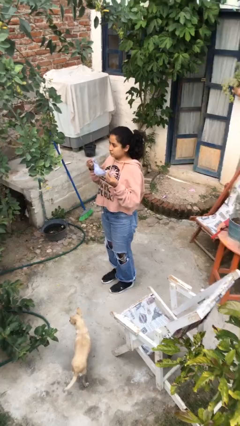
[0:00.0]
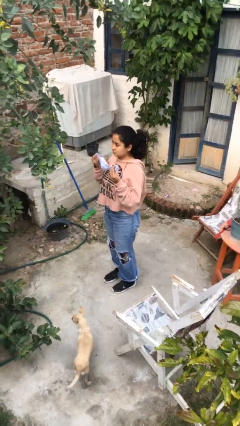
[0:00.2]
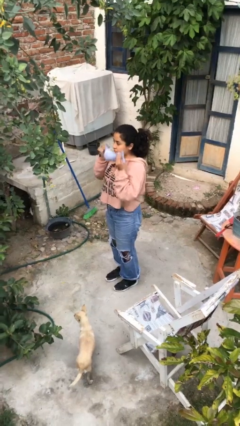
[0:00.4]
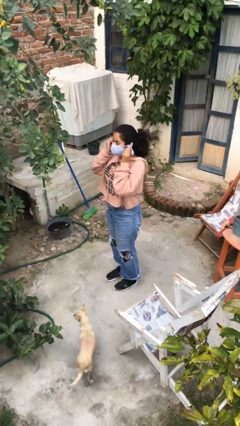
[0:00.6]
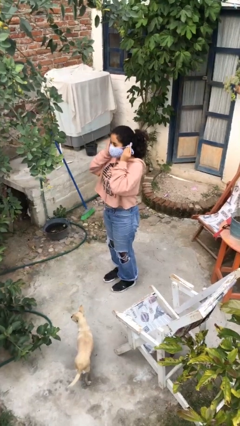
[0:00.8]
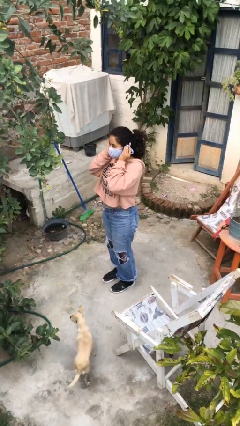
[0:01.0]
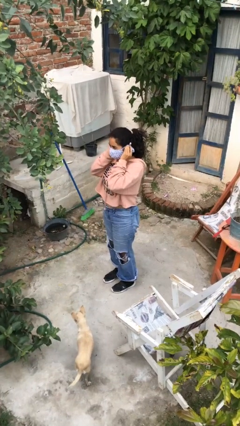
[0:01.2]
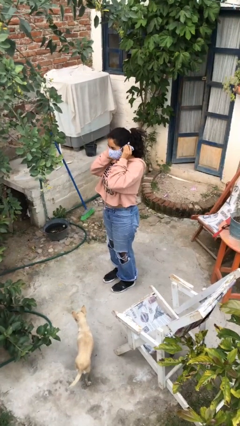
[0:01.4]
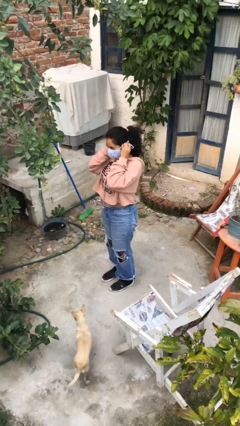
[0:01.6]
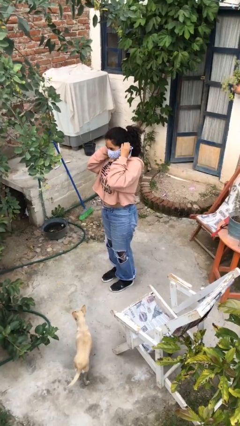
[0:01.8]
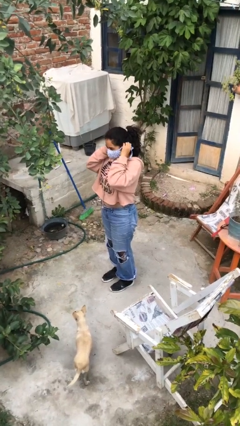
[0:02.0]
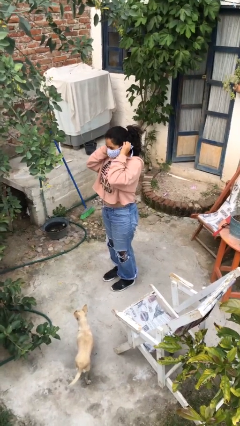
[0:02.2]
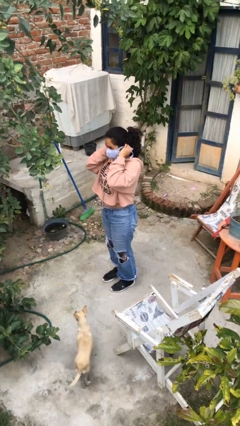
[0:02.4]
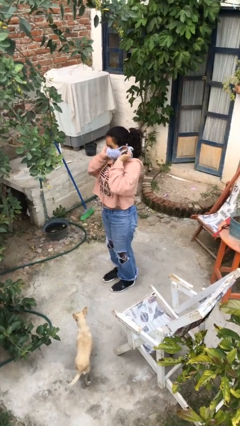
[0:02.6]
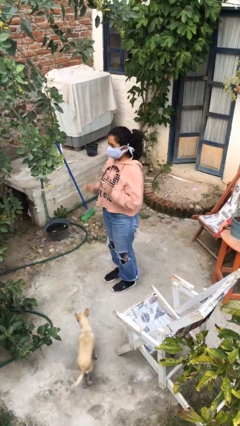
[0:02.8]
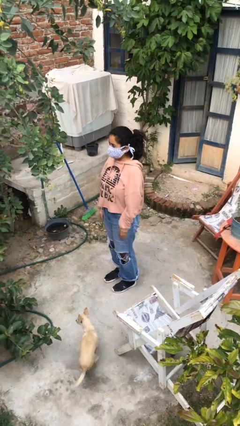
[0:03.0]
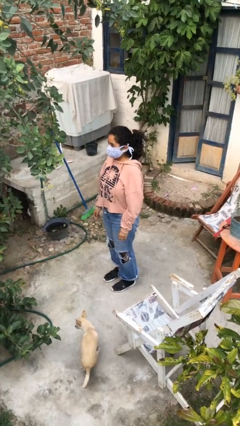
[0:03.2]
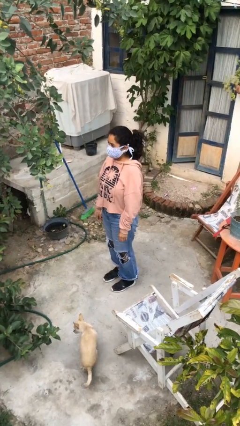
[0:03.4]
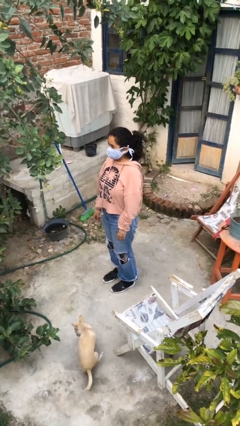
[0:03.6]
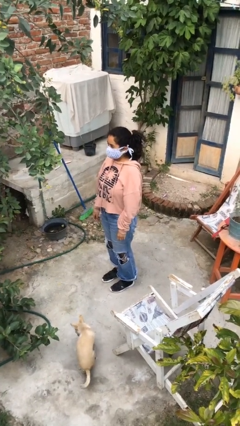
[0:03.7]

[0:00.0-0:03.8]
person puts on facemask

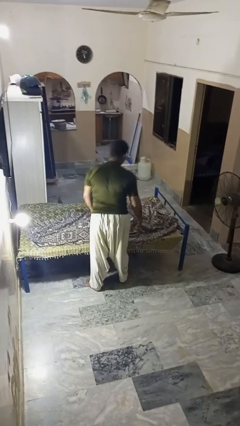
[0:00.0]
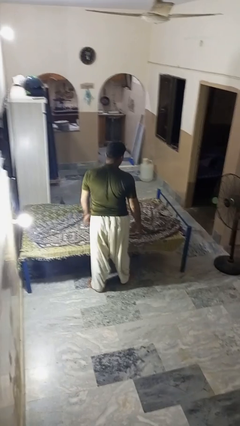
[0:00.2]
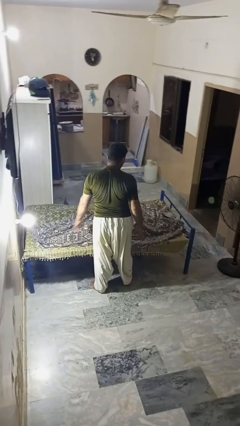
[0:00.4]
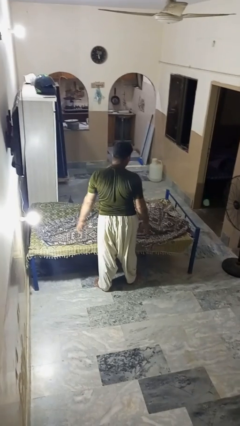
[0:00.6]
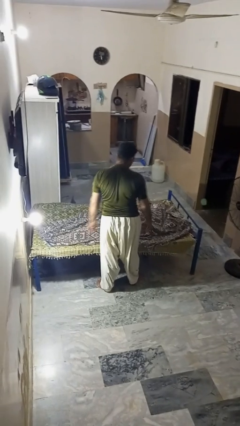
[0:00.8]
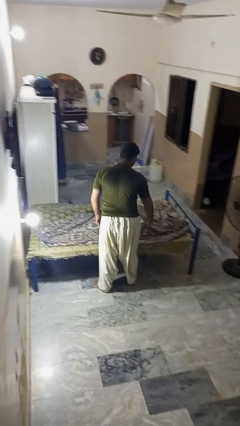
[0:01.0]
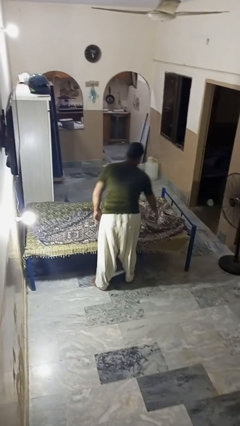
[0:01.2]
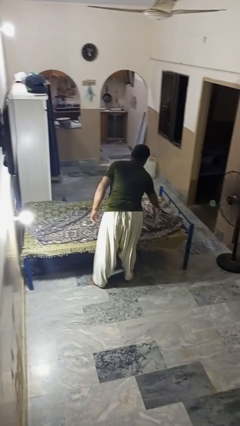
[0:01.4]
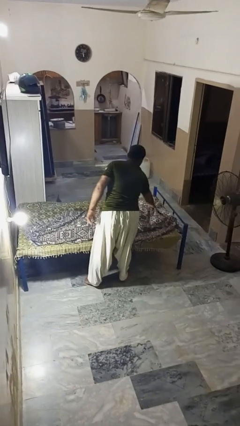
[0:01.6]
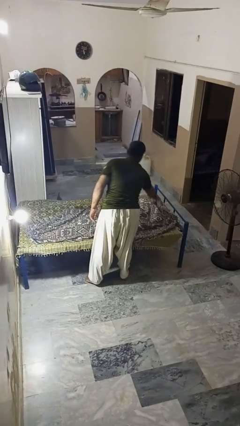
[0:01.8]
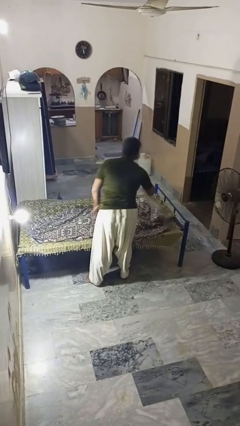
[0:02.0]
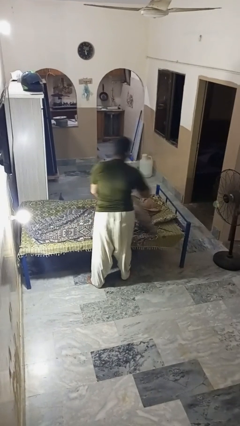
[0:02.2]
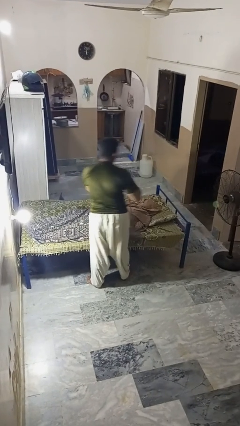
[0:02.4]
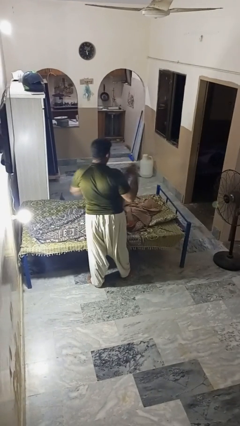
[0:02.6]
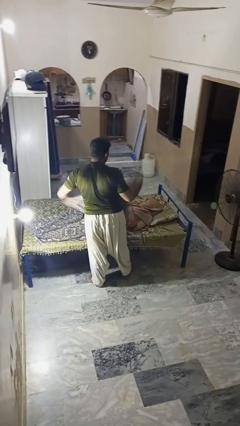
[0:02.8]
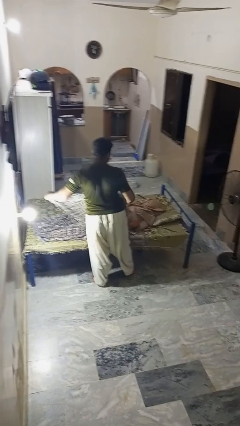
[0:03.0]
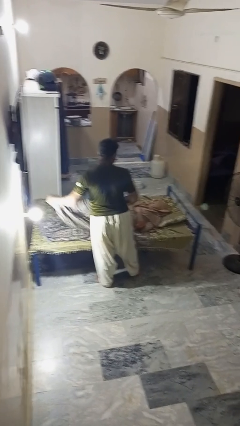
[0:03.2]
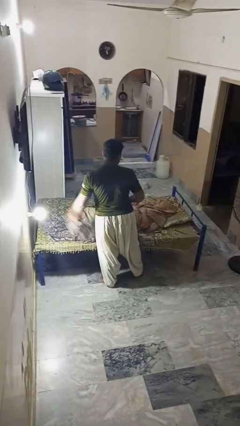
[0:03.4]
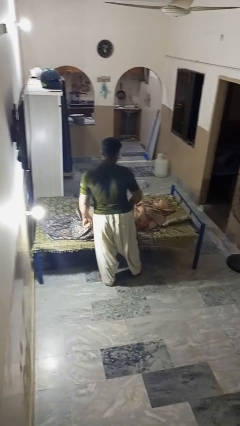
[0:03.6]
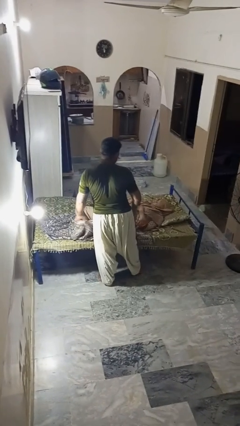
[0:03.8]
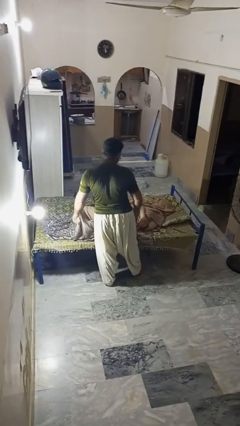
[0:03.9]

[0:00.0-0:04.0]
person uncovers friend with blanket

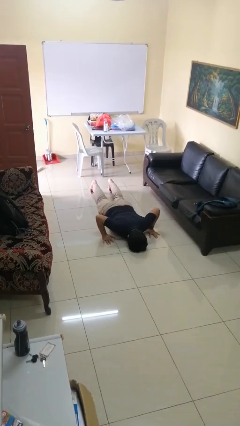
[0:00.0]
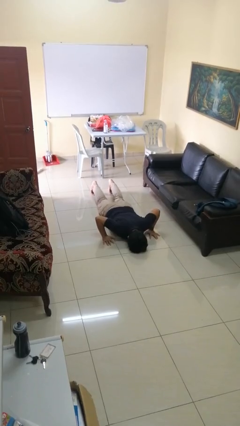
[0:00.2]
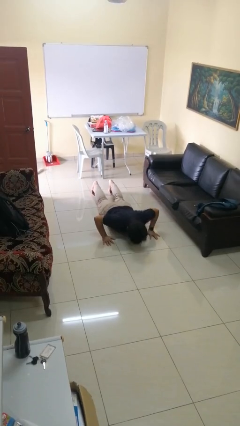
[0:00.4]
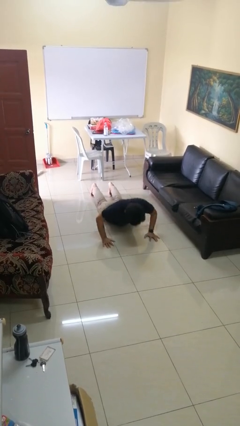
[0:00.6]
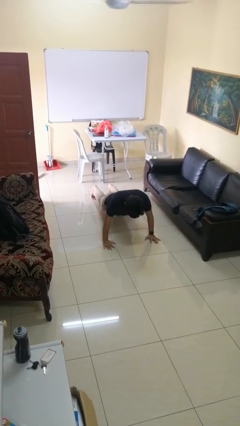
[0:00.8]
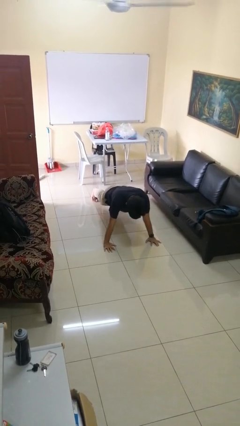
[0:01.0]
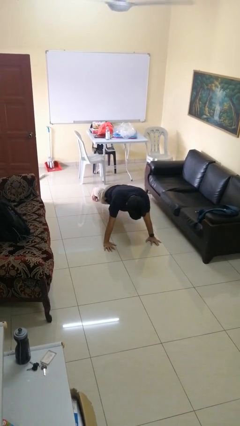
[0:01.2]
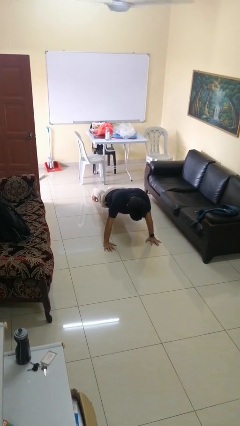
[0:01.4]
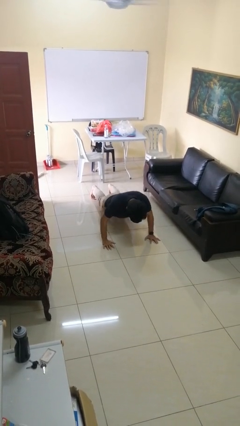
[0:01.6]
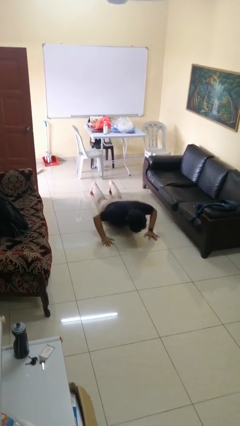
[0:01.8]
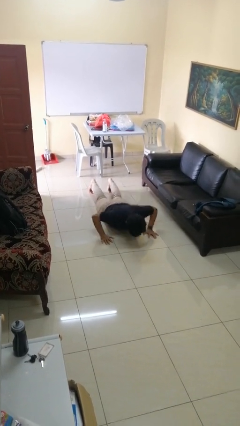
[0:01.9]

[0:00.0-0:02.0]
person exercises with pushup

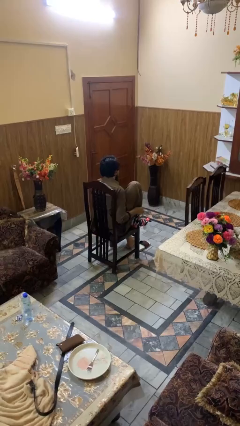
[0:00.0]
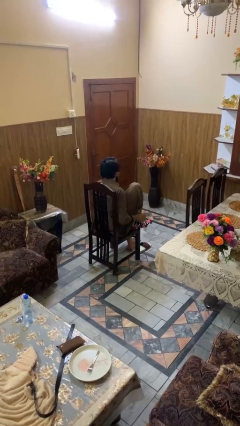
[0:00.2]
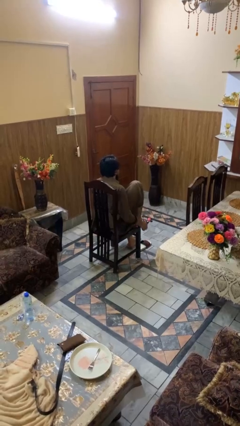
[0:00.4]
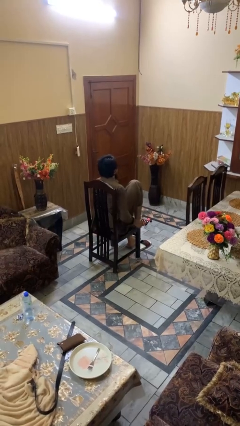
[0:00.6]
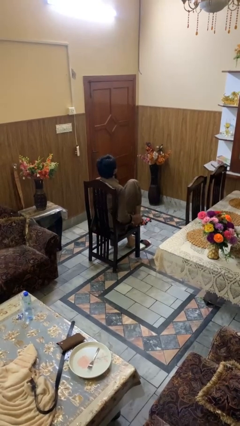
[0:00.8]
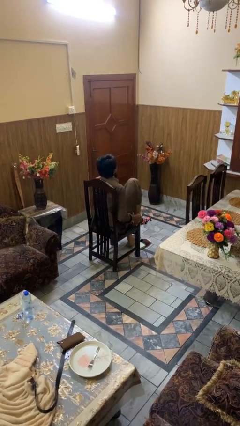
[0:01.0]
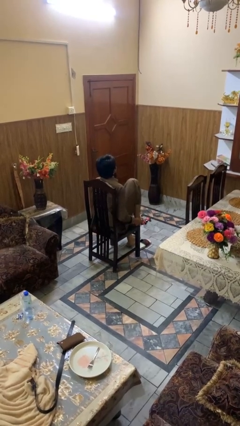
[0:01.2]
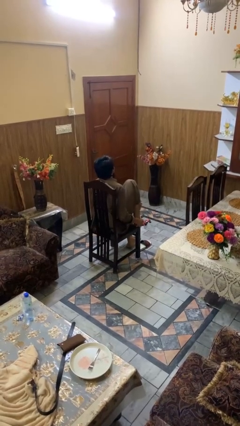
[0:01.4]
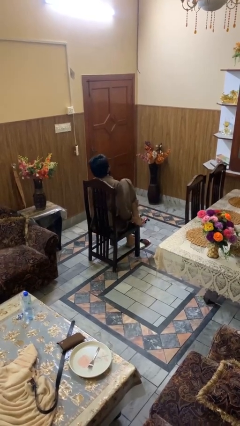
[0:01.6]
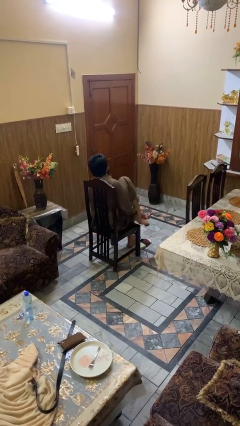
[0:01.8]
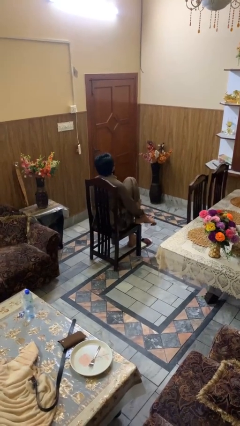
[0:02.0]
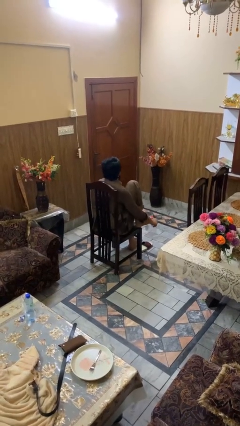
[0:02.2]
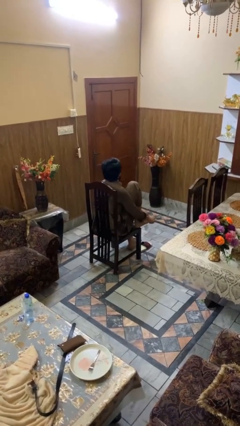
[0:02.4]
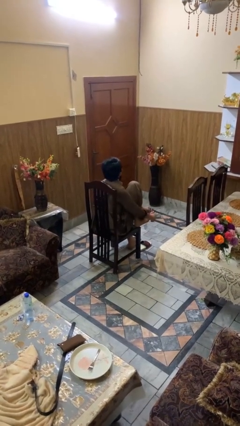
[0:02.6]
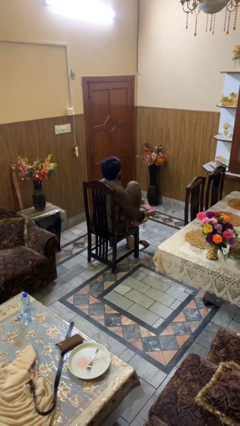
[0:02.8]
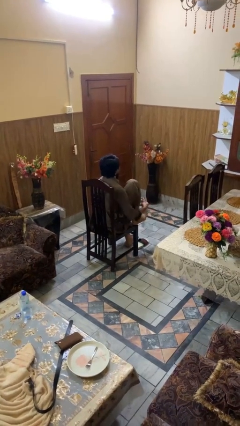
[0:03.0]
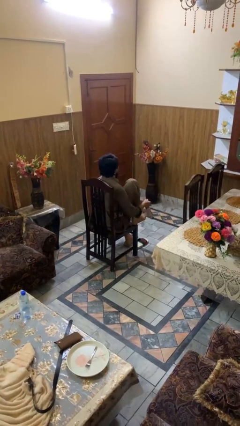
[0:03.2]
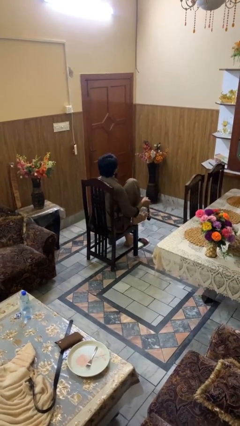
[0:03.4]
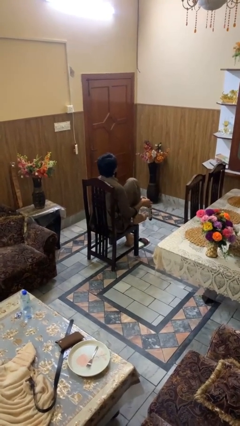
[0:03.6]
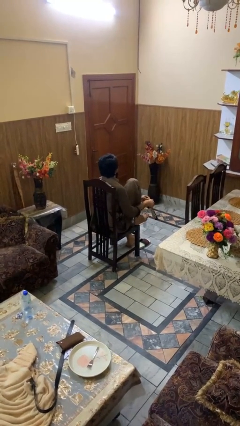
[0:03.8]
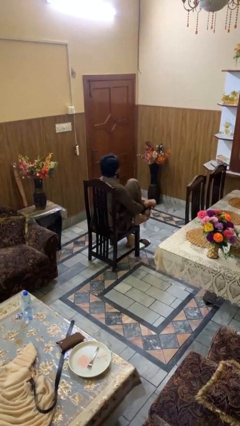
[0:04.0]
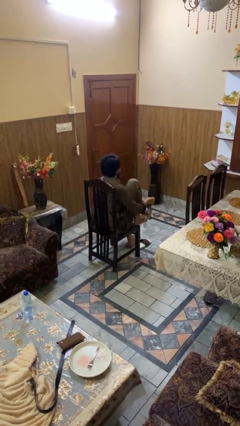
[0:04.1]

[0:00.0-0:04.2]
person takes off socks

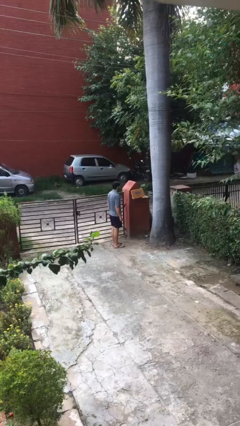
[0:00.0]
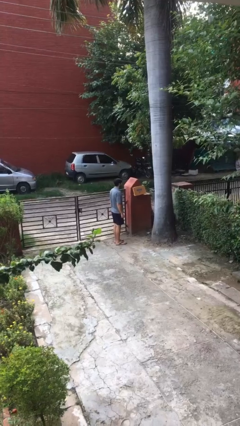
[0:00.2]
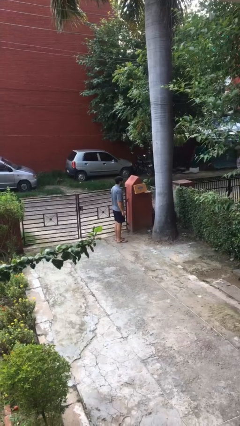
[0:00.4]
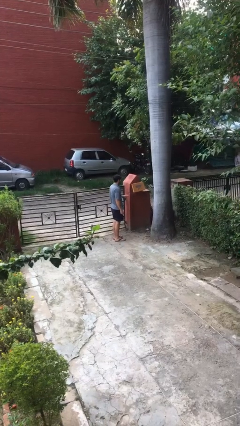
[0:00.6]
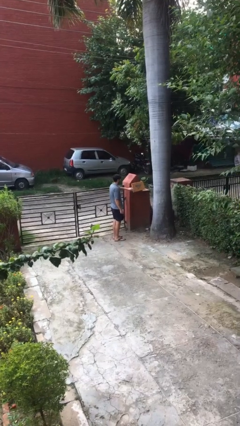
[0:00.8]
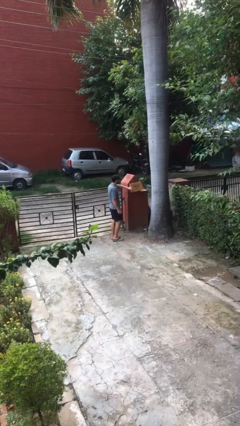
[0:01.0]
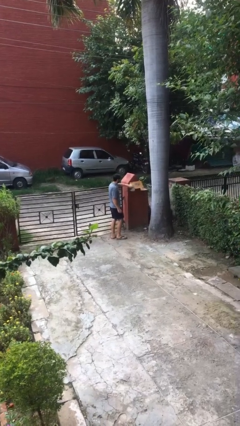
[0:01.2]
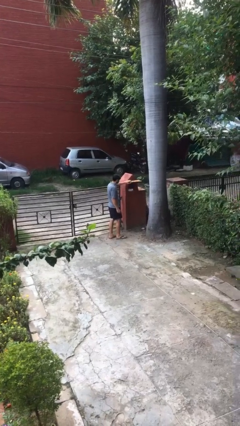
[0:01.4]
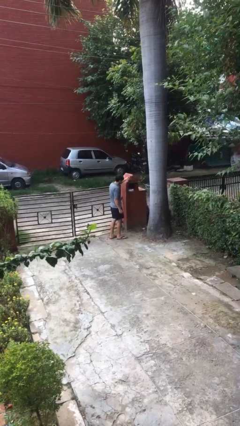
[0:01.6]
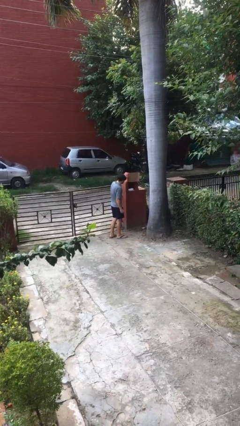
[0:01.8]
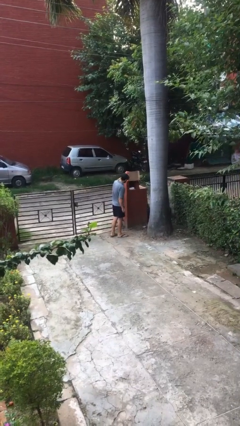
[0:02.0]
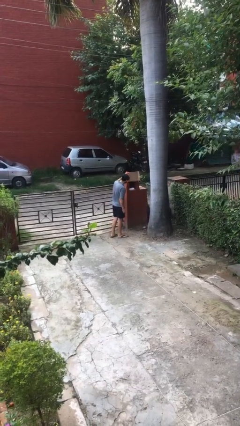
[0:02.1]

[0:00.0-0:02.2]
person opens mailbox

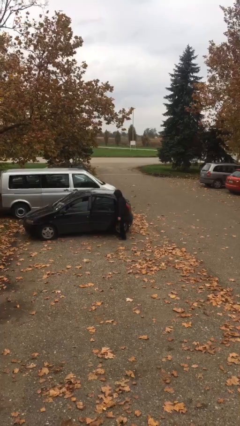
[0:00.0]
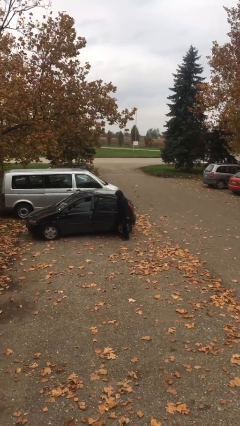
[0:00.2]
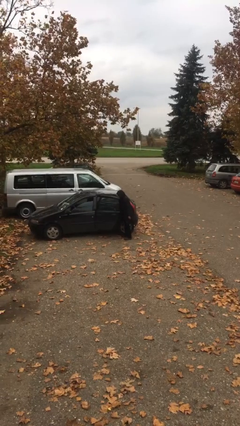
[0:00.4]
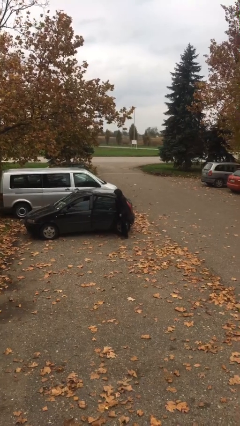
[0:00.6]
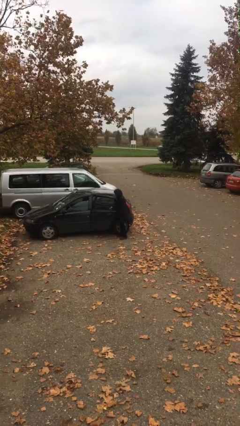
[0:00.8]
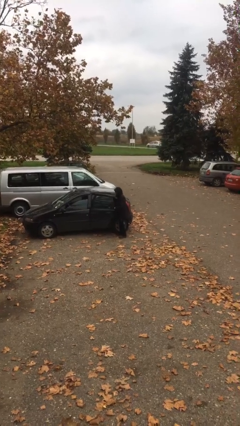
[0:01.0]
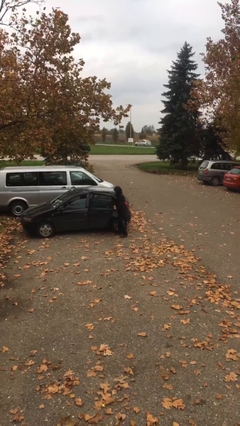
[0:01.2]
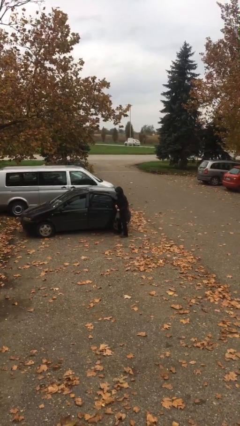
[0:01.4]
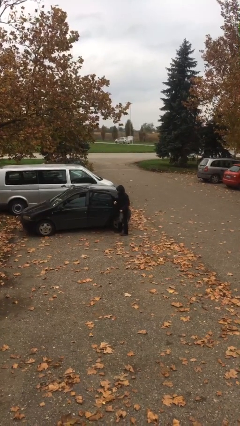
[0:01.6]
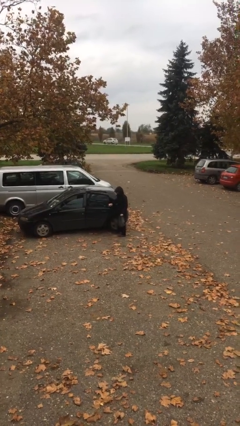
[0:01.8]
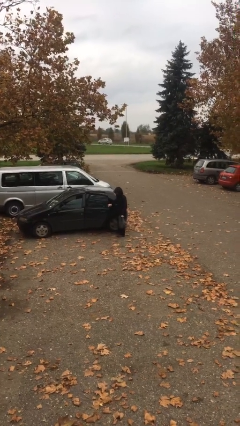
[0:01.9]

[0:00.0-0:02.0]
person unloads car
